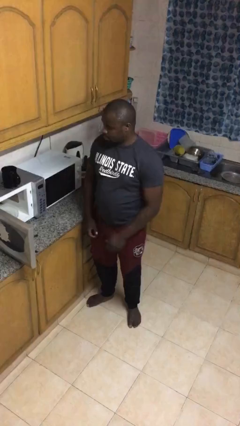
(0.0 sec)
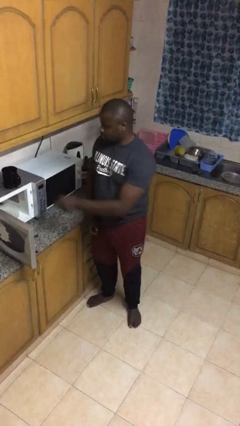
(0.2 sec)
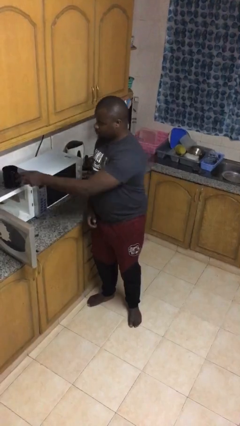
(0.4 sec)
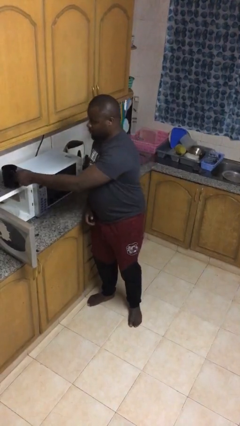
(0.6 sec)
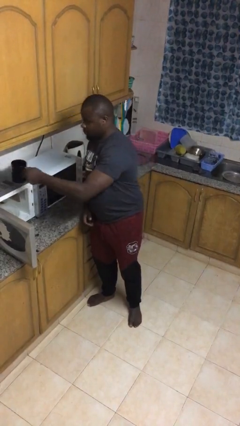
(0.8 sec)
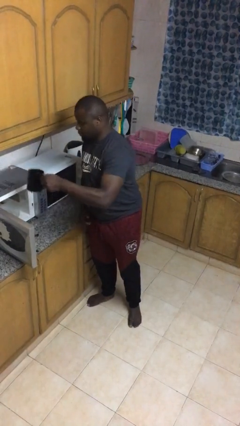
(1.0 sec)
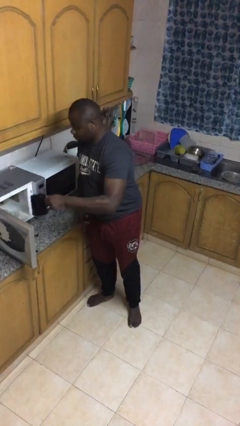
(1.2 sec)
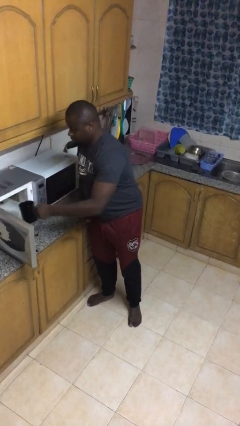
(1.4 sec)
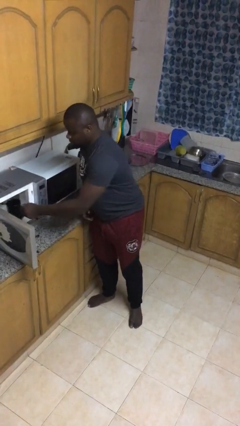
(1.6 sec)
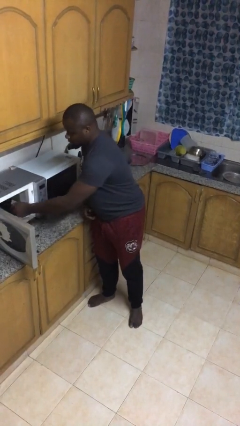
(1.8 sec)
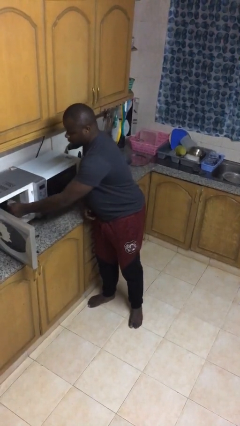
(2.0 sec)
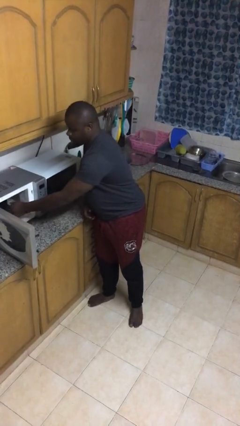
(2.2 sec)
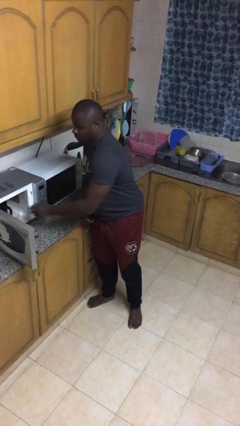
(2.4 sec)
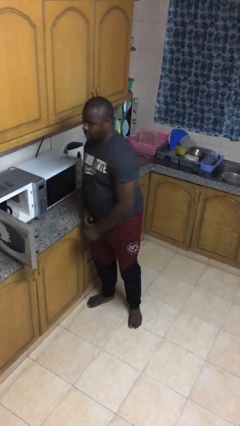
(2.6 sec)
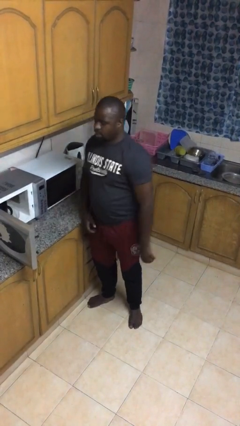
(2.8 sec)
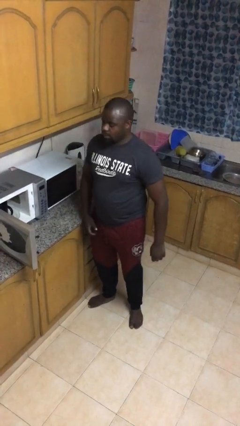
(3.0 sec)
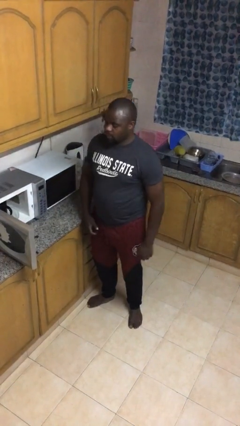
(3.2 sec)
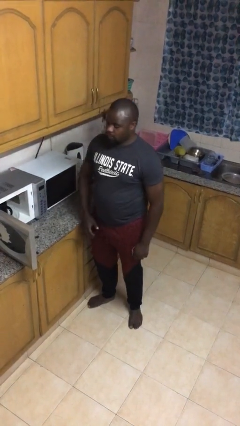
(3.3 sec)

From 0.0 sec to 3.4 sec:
person puts object into microwave

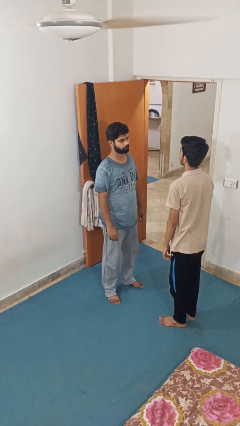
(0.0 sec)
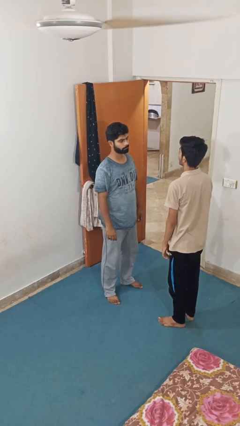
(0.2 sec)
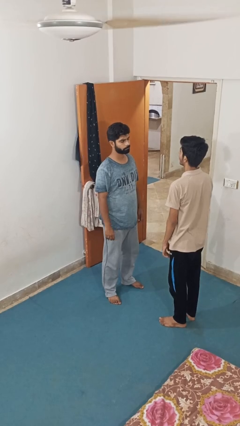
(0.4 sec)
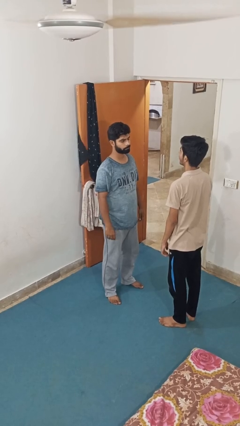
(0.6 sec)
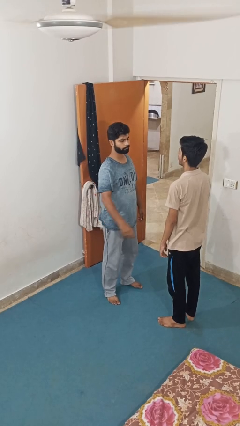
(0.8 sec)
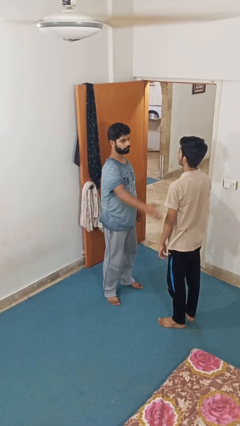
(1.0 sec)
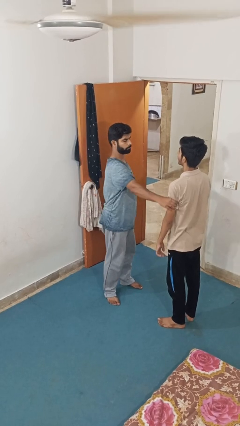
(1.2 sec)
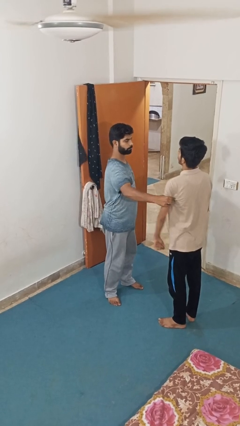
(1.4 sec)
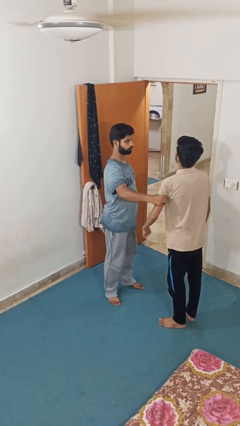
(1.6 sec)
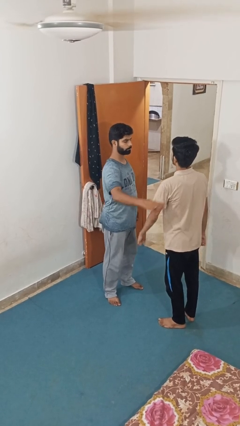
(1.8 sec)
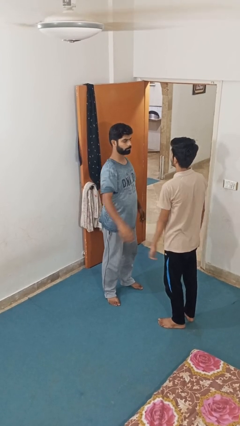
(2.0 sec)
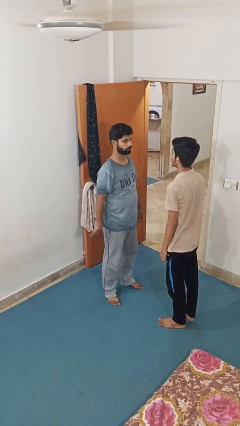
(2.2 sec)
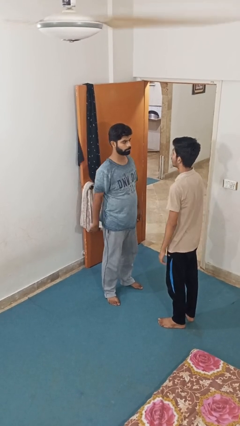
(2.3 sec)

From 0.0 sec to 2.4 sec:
person grabs person by bicep

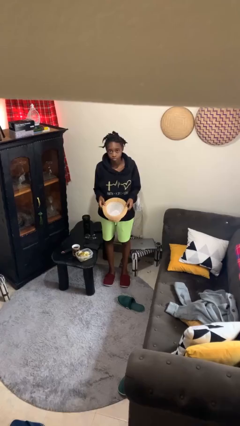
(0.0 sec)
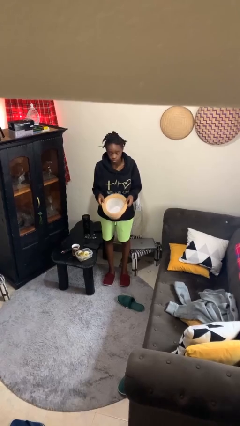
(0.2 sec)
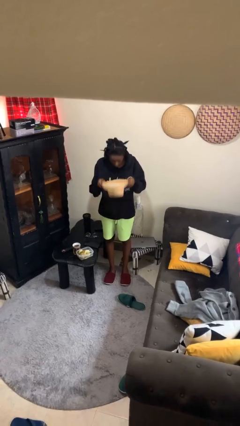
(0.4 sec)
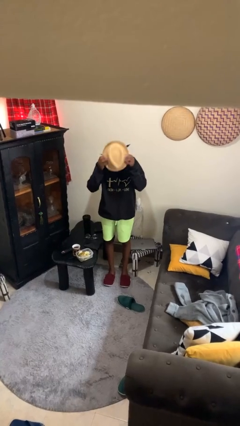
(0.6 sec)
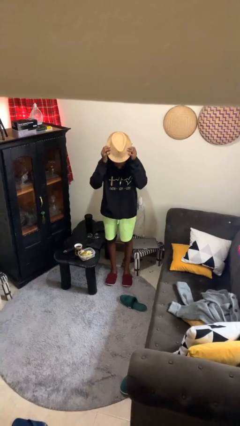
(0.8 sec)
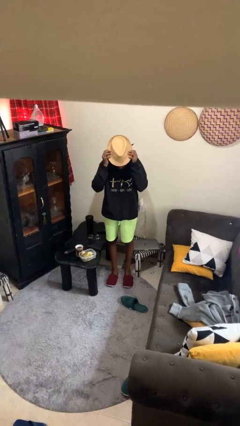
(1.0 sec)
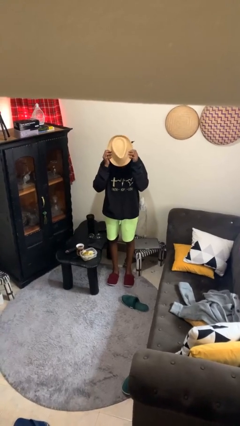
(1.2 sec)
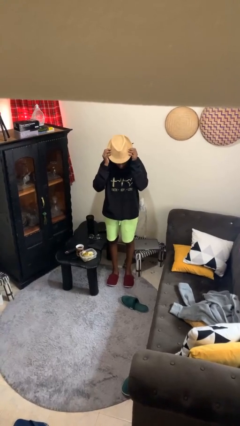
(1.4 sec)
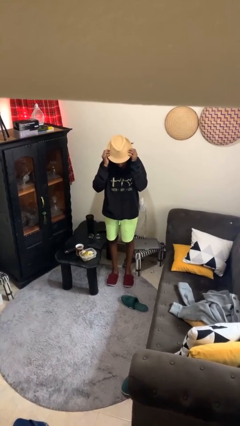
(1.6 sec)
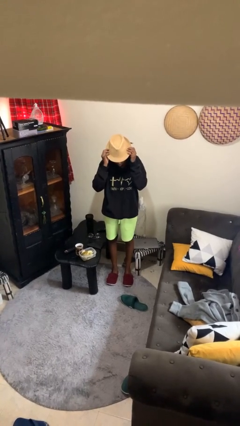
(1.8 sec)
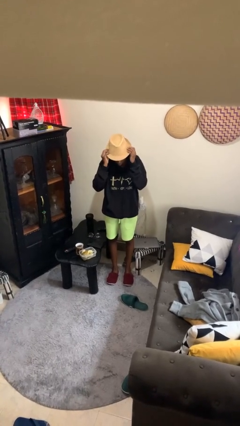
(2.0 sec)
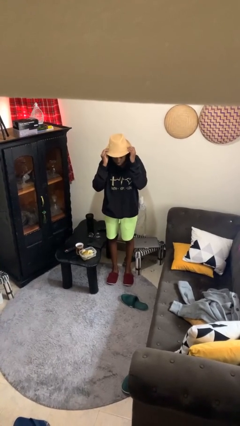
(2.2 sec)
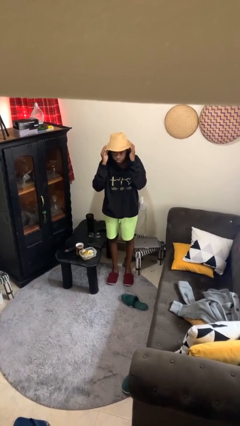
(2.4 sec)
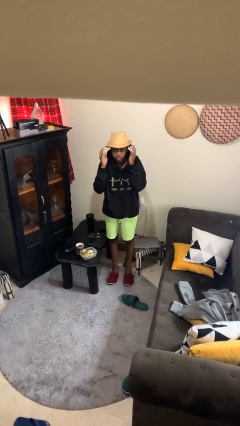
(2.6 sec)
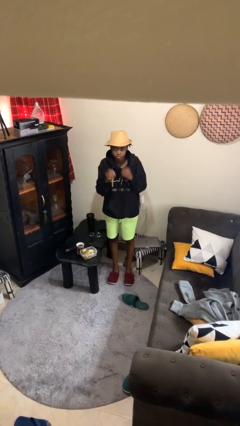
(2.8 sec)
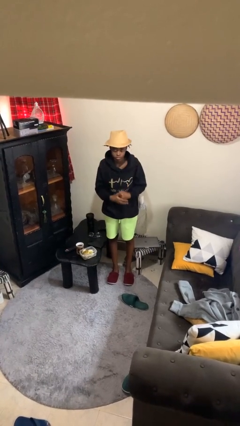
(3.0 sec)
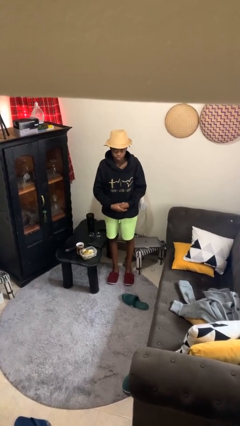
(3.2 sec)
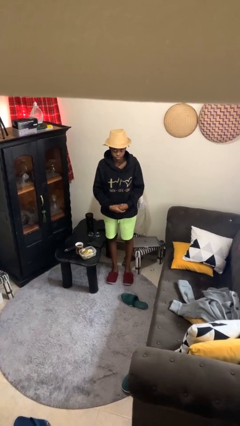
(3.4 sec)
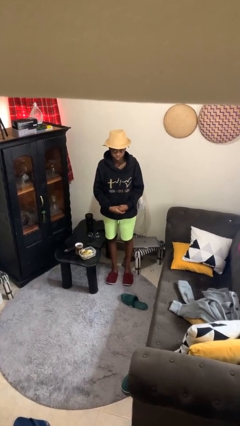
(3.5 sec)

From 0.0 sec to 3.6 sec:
person puts on hat

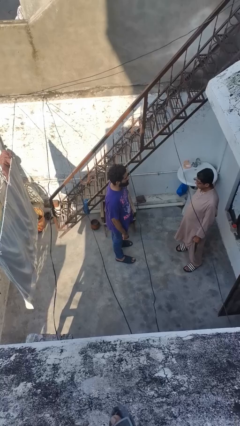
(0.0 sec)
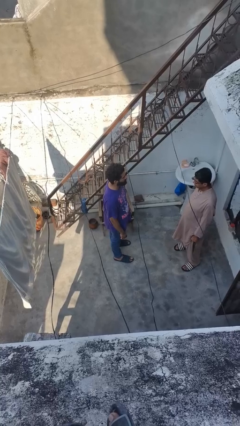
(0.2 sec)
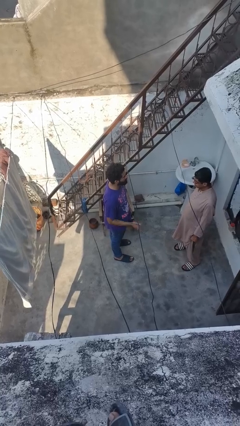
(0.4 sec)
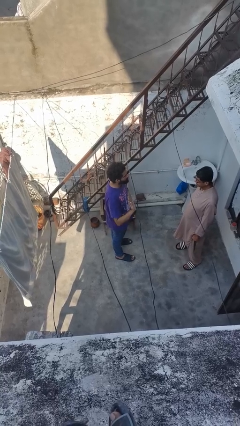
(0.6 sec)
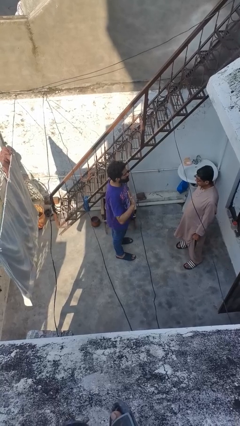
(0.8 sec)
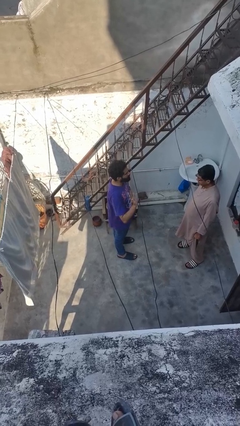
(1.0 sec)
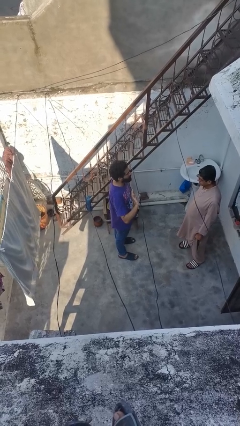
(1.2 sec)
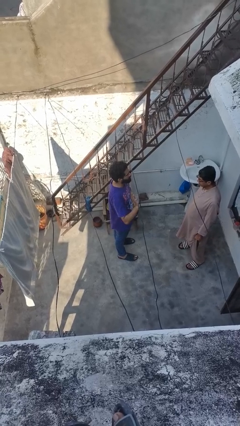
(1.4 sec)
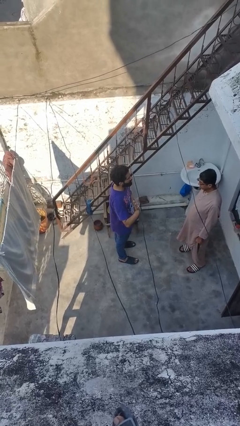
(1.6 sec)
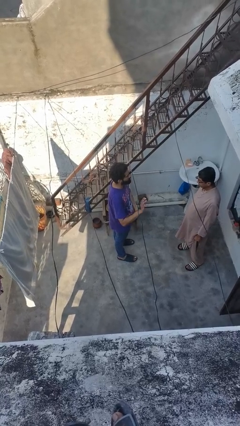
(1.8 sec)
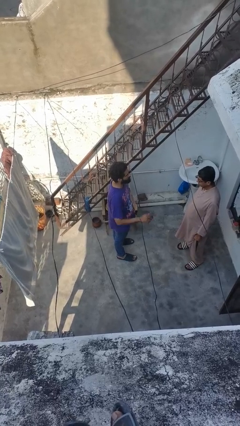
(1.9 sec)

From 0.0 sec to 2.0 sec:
person waves at person

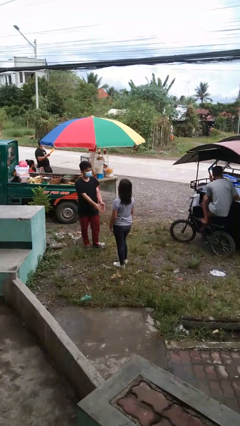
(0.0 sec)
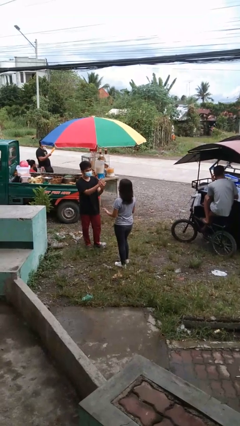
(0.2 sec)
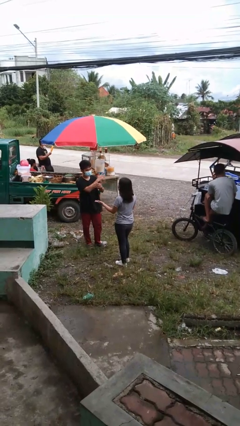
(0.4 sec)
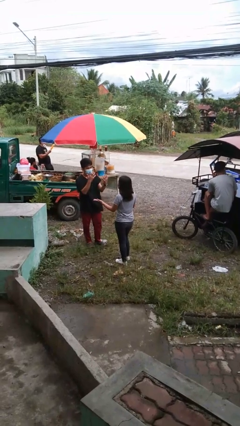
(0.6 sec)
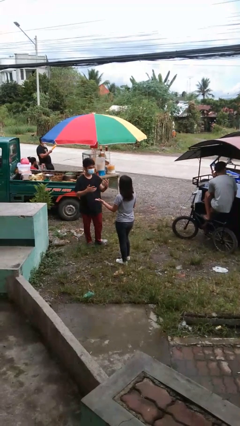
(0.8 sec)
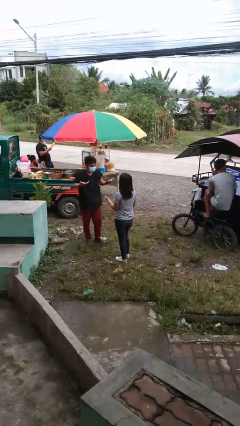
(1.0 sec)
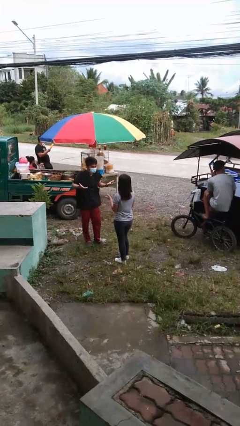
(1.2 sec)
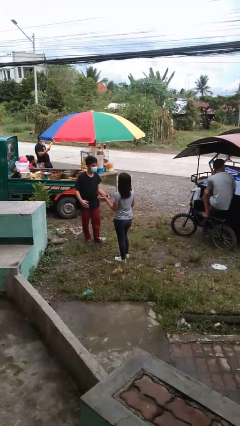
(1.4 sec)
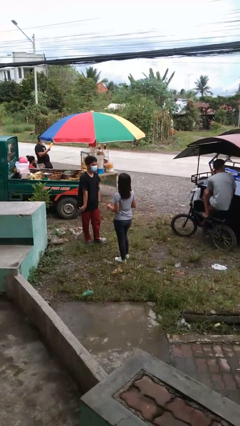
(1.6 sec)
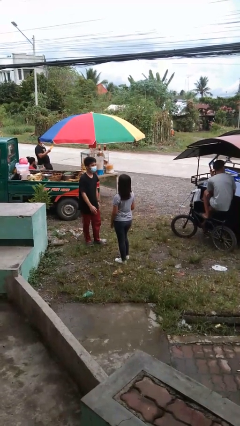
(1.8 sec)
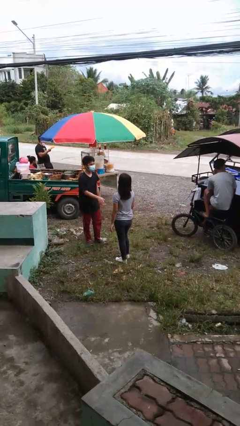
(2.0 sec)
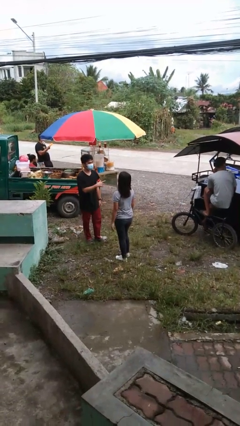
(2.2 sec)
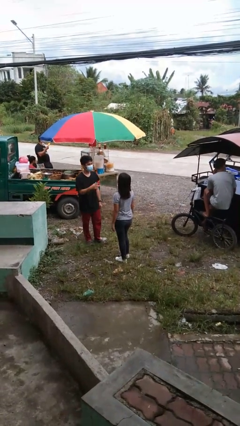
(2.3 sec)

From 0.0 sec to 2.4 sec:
person talks to person

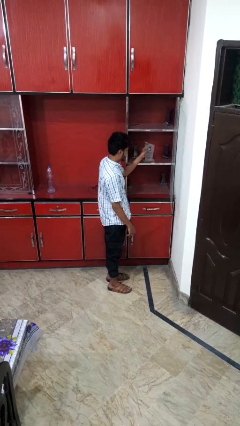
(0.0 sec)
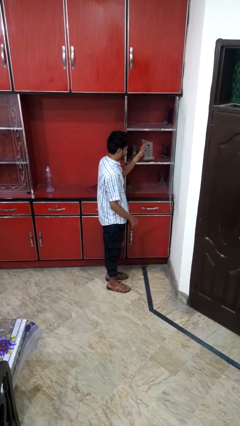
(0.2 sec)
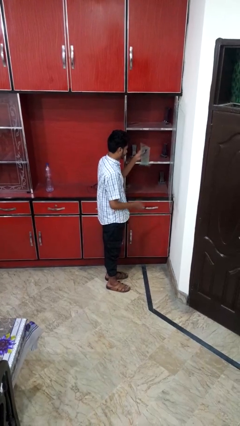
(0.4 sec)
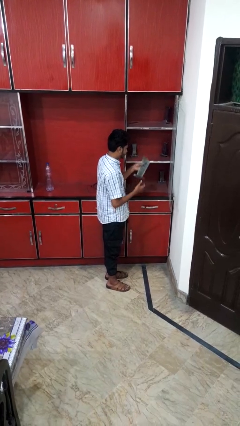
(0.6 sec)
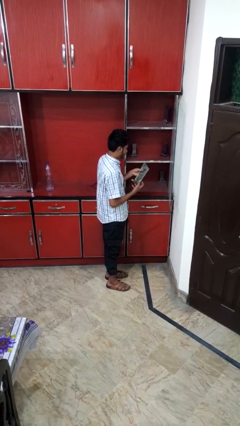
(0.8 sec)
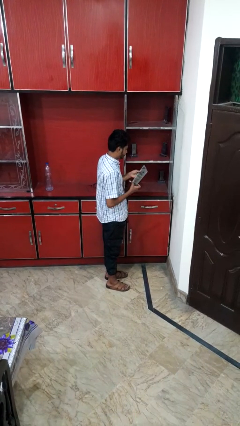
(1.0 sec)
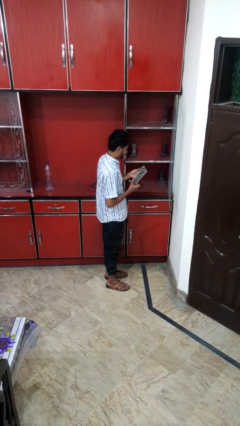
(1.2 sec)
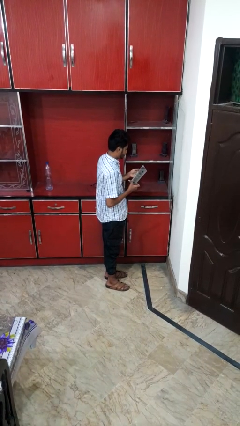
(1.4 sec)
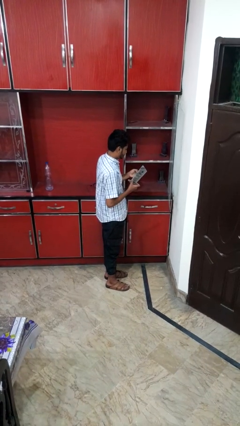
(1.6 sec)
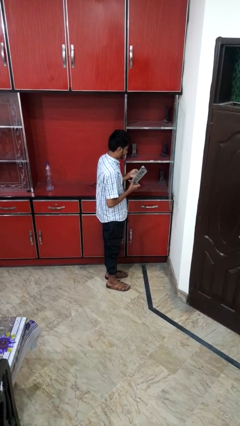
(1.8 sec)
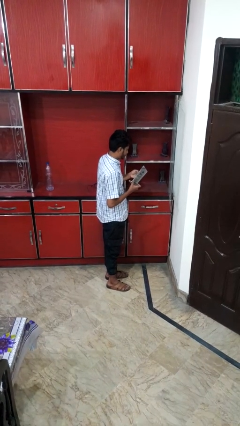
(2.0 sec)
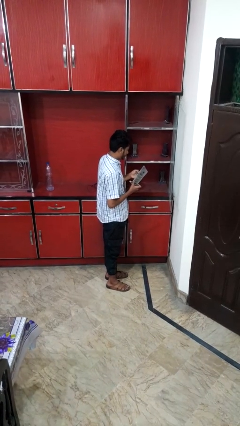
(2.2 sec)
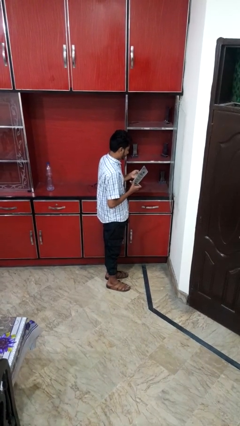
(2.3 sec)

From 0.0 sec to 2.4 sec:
person picks up object from cabinet

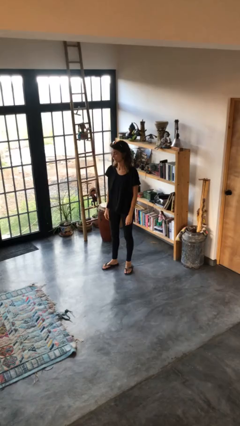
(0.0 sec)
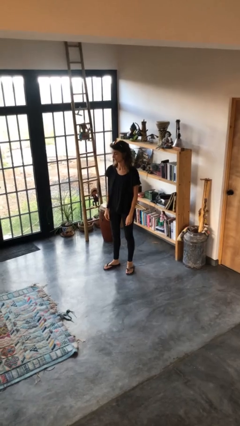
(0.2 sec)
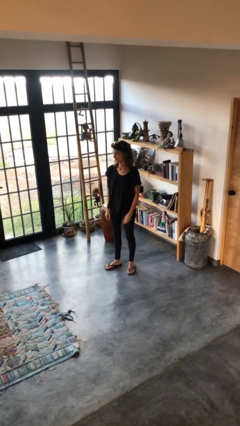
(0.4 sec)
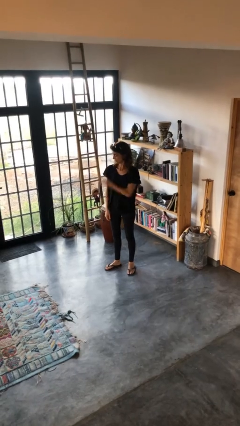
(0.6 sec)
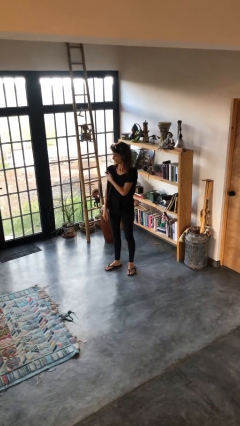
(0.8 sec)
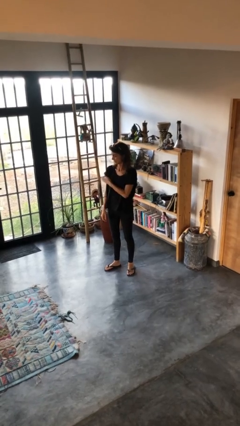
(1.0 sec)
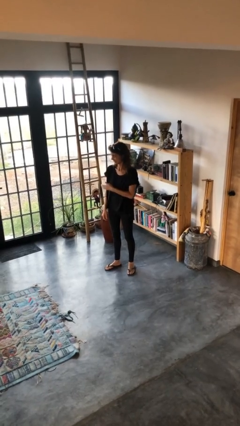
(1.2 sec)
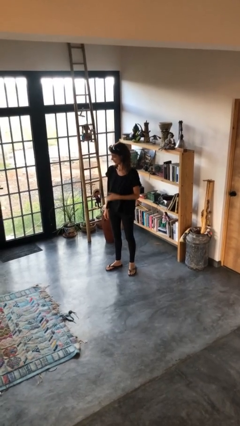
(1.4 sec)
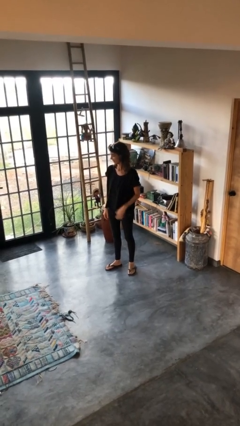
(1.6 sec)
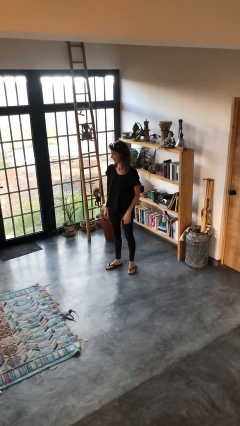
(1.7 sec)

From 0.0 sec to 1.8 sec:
person swats bug
